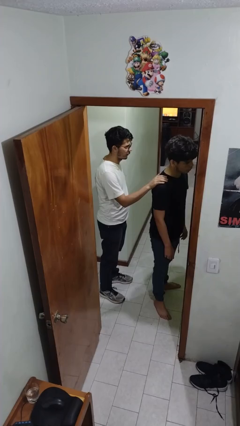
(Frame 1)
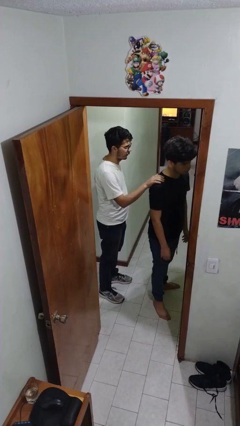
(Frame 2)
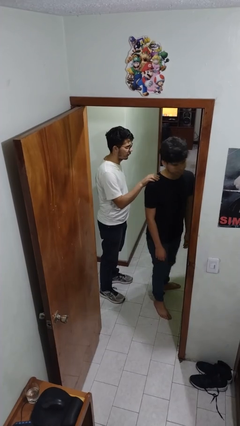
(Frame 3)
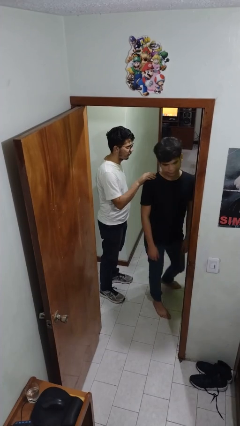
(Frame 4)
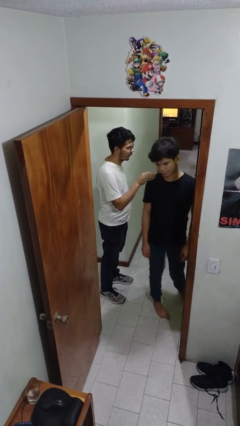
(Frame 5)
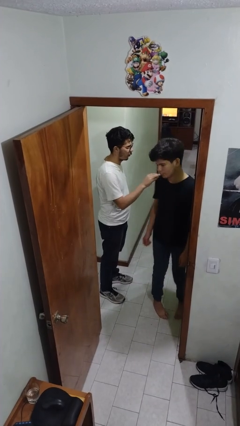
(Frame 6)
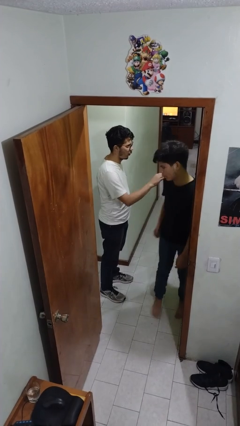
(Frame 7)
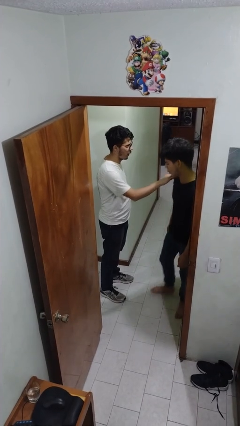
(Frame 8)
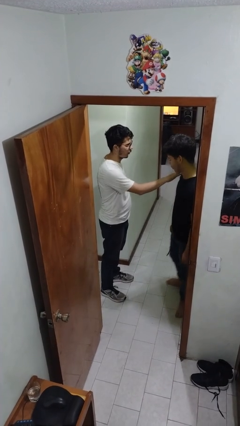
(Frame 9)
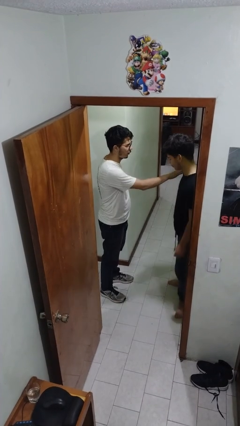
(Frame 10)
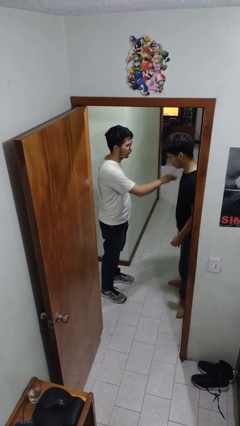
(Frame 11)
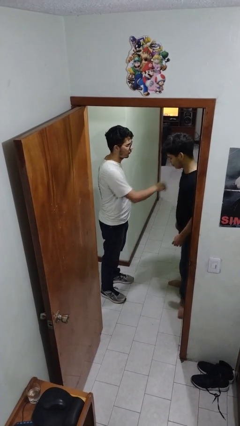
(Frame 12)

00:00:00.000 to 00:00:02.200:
person spins person around

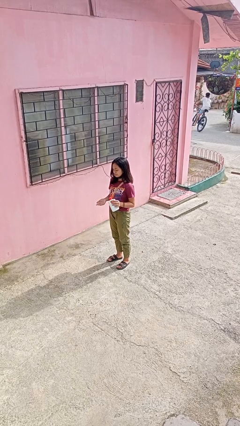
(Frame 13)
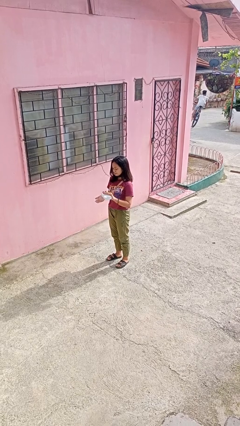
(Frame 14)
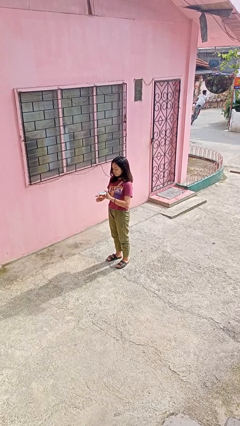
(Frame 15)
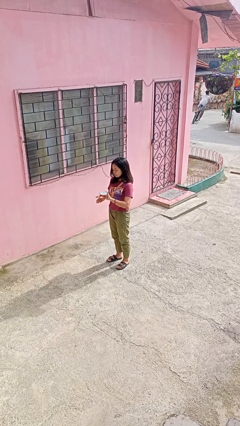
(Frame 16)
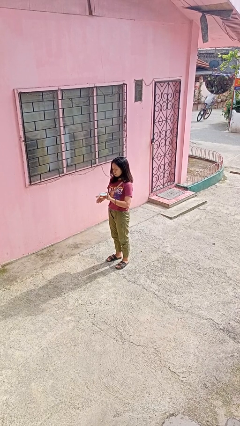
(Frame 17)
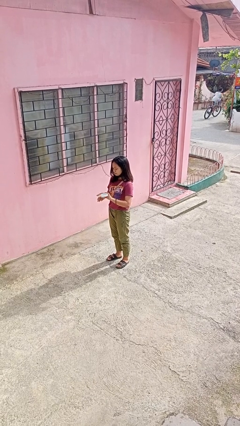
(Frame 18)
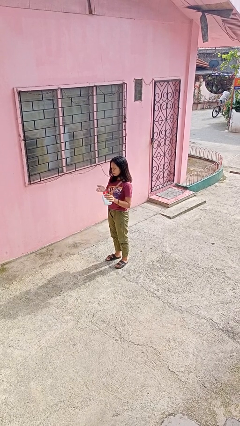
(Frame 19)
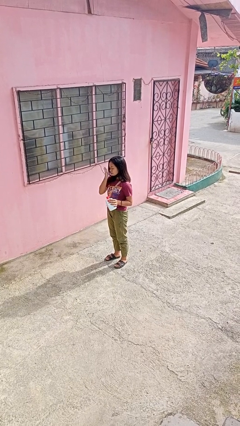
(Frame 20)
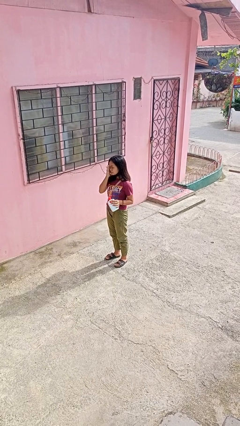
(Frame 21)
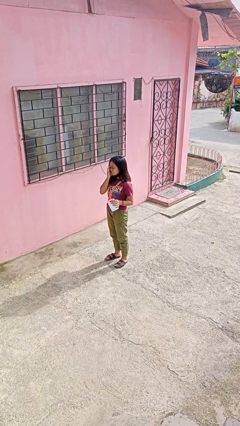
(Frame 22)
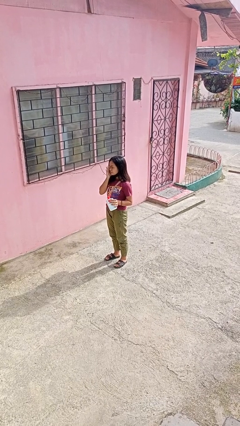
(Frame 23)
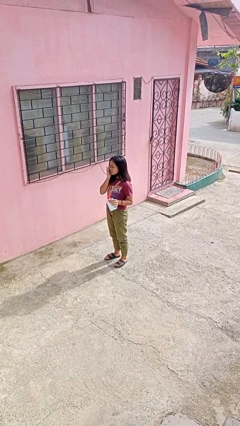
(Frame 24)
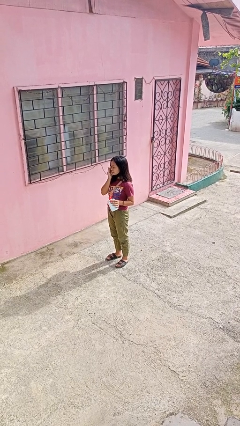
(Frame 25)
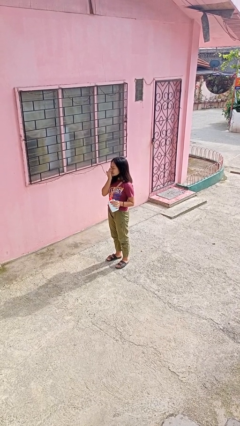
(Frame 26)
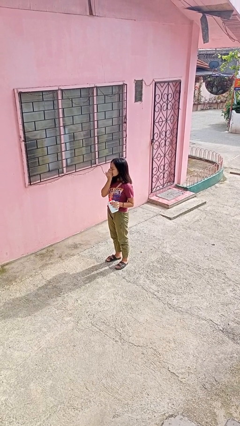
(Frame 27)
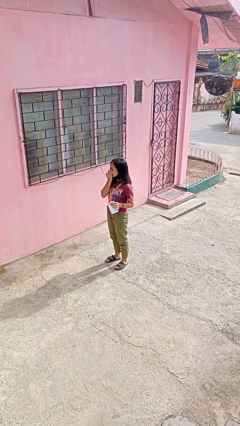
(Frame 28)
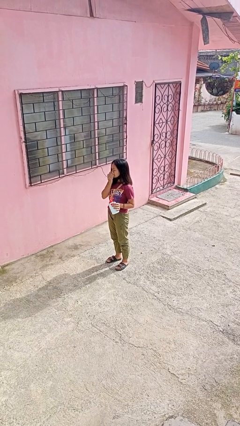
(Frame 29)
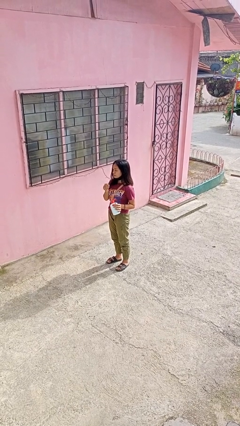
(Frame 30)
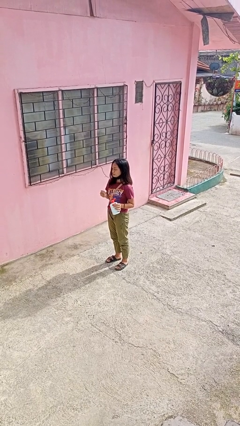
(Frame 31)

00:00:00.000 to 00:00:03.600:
person applies facial moisturizer

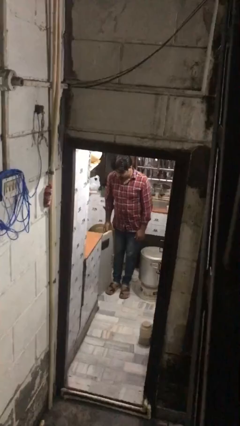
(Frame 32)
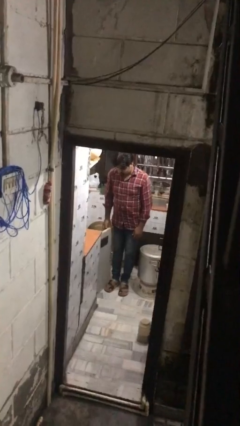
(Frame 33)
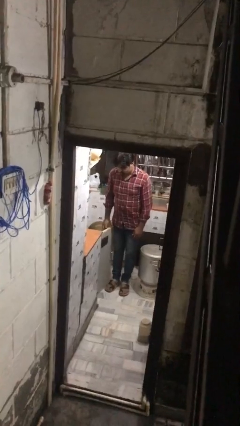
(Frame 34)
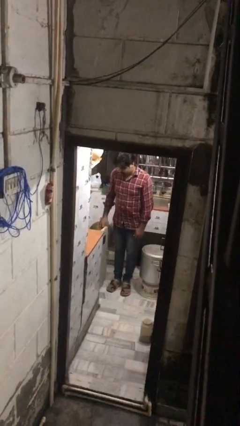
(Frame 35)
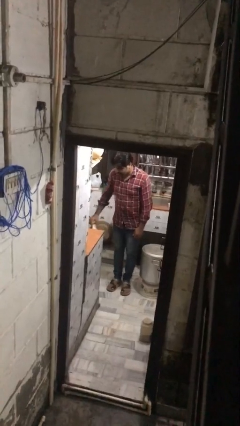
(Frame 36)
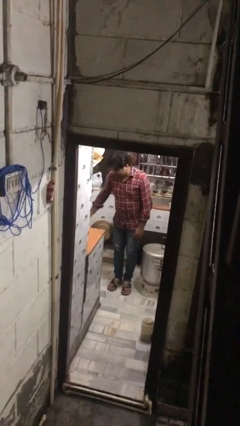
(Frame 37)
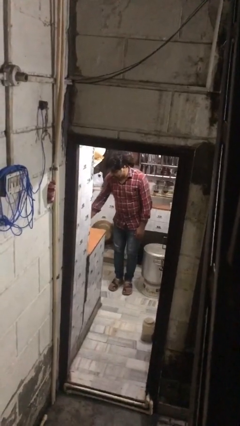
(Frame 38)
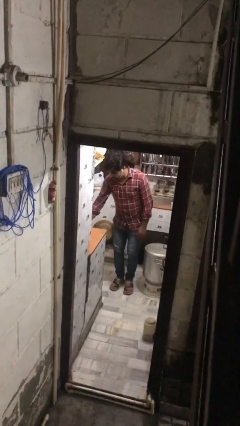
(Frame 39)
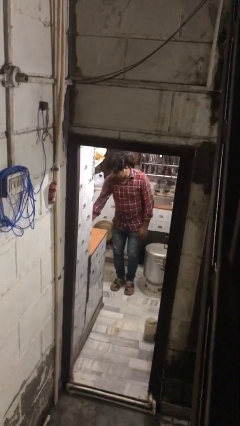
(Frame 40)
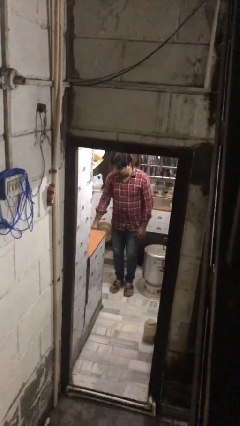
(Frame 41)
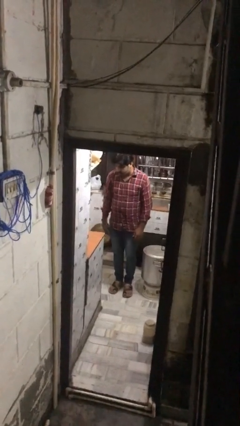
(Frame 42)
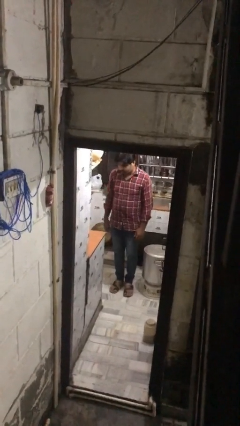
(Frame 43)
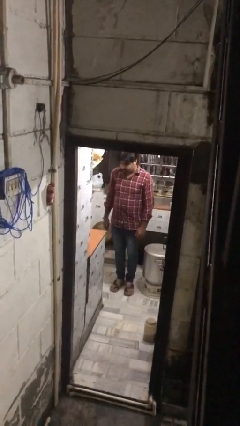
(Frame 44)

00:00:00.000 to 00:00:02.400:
person closes kitchen drawer

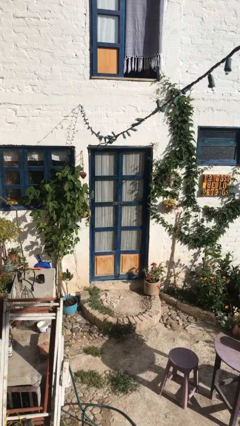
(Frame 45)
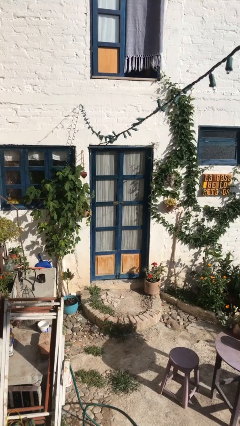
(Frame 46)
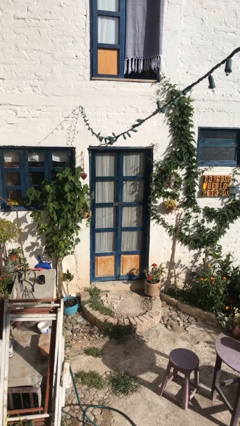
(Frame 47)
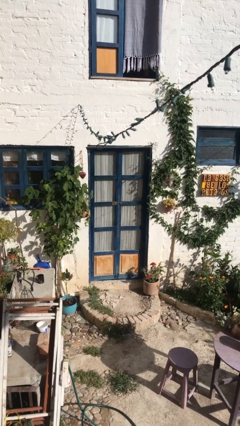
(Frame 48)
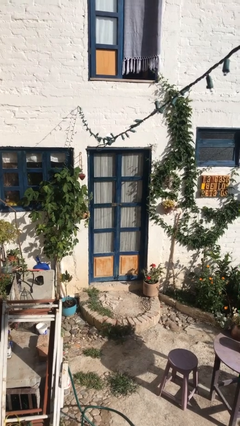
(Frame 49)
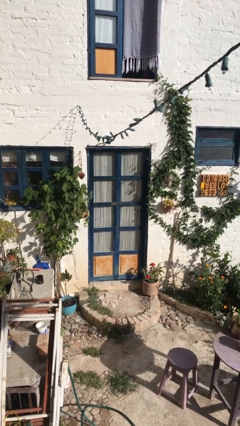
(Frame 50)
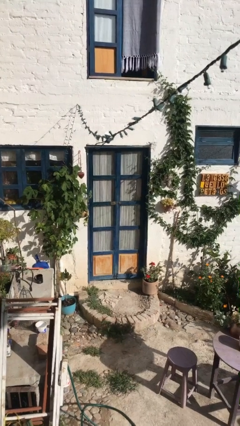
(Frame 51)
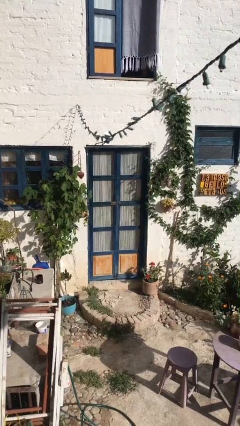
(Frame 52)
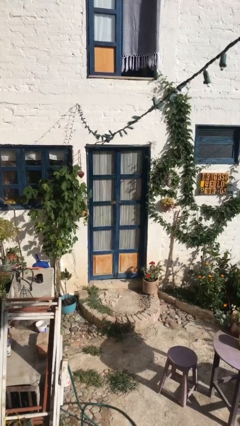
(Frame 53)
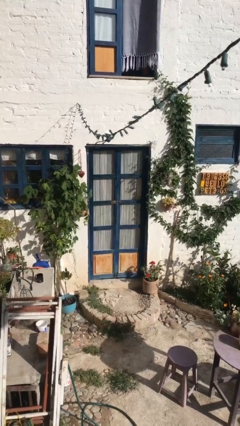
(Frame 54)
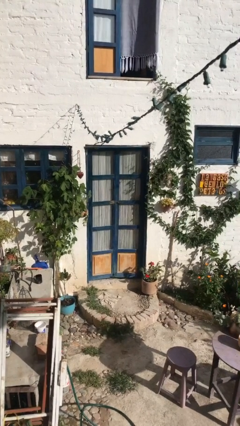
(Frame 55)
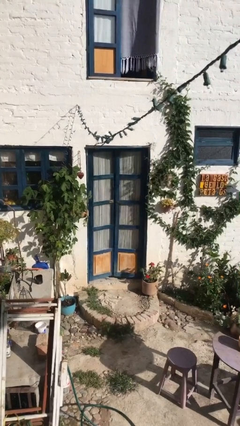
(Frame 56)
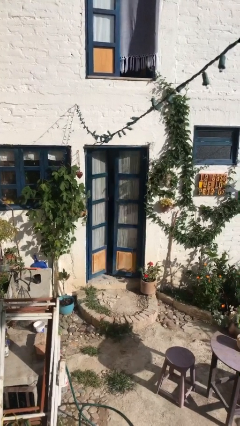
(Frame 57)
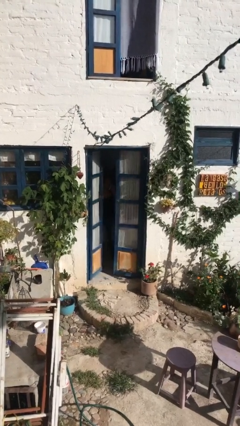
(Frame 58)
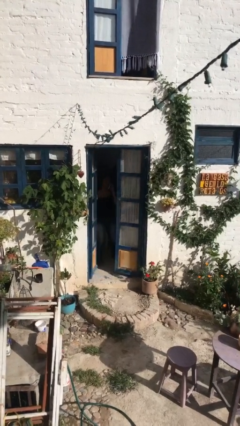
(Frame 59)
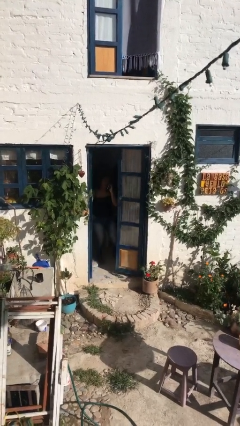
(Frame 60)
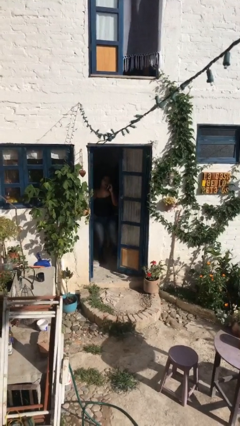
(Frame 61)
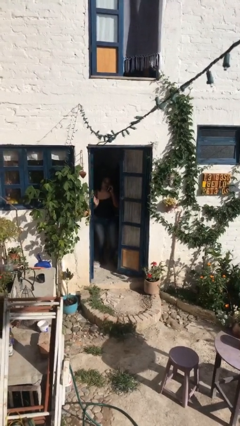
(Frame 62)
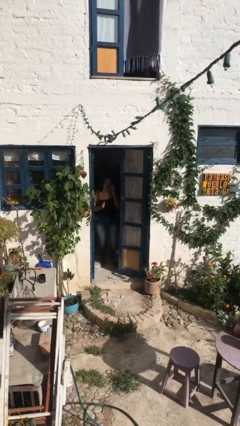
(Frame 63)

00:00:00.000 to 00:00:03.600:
person opens facility door

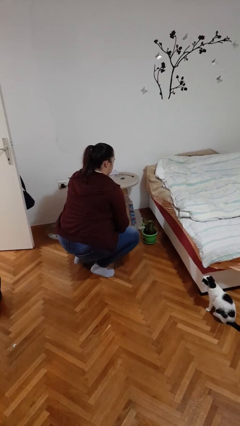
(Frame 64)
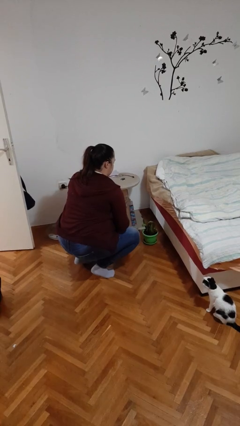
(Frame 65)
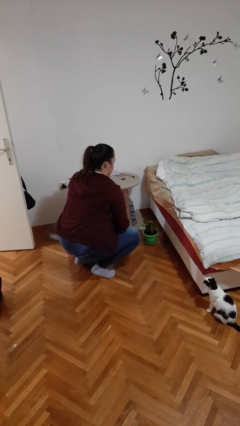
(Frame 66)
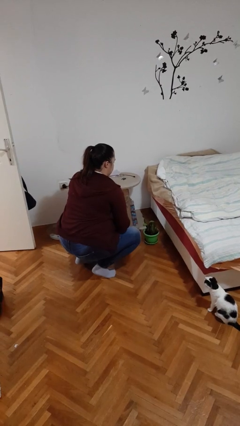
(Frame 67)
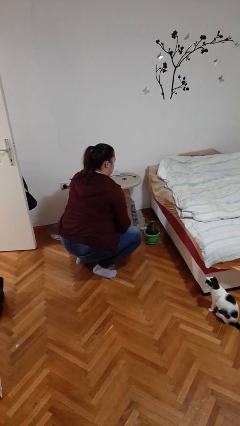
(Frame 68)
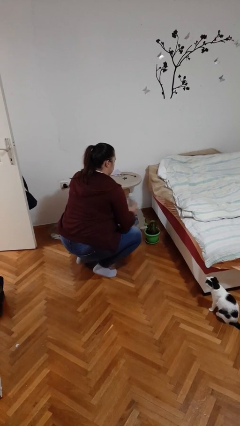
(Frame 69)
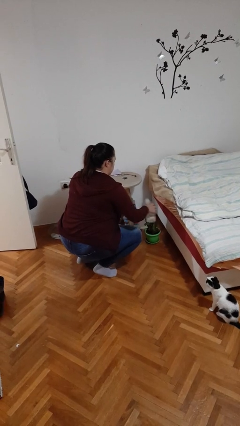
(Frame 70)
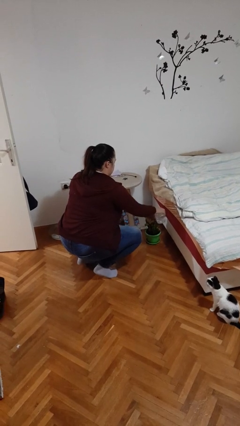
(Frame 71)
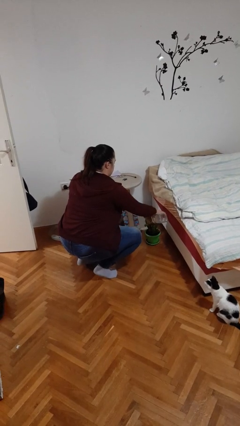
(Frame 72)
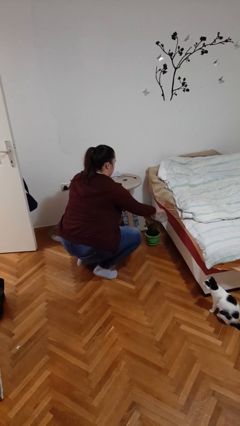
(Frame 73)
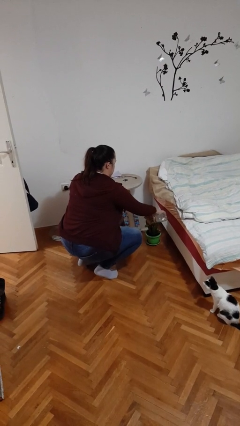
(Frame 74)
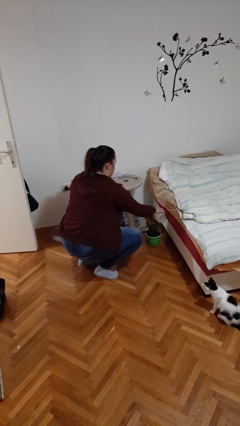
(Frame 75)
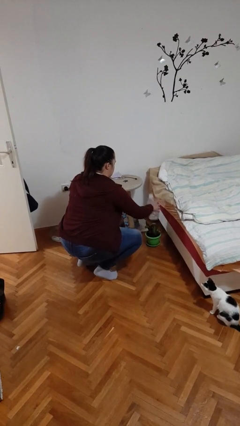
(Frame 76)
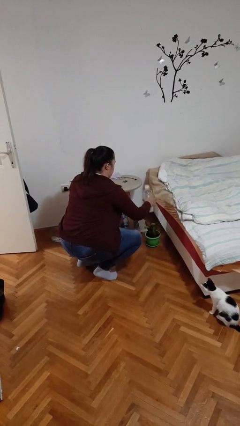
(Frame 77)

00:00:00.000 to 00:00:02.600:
person waters houseplant

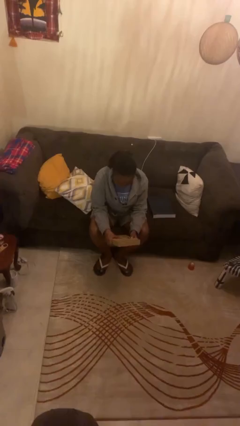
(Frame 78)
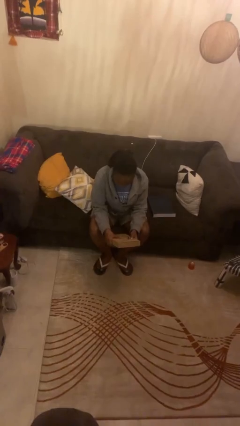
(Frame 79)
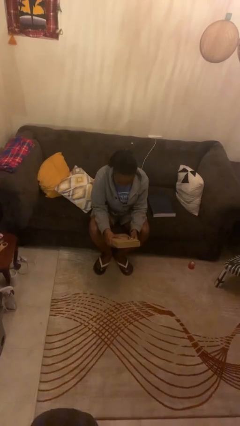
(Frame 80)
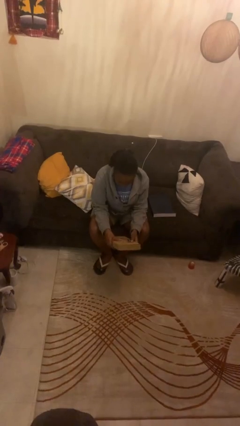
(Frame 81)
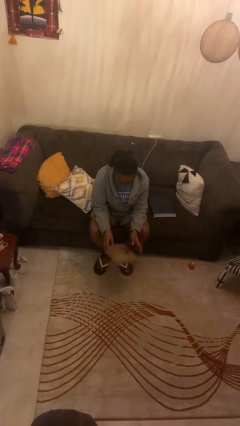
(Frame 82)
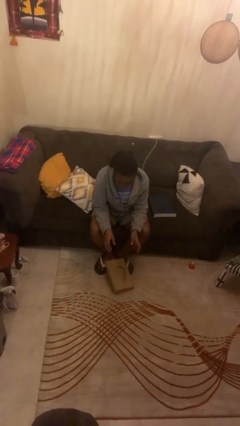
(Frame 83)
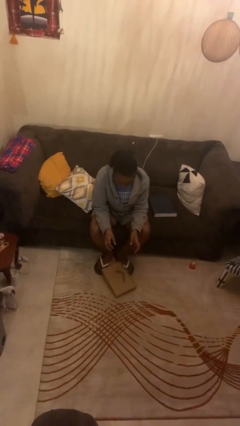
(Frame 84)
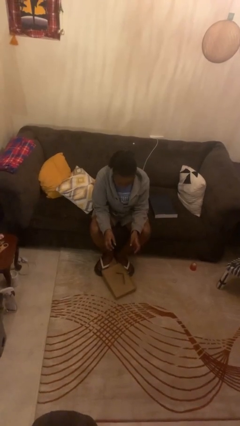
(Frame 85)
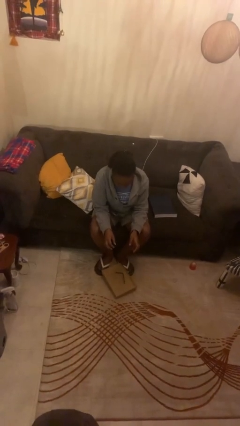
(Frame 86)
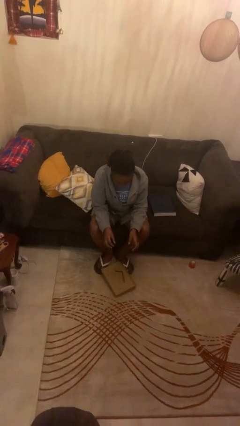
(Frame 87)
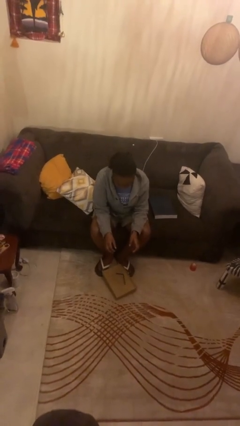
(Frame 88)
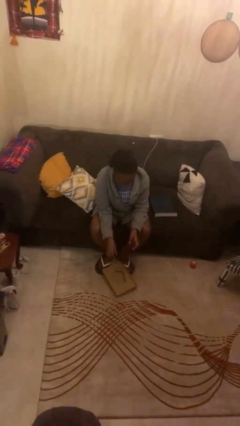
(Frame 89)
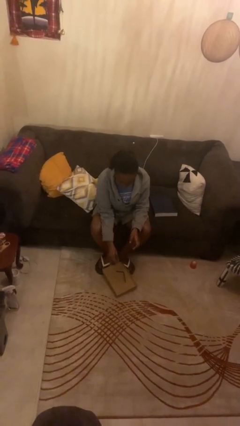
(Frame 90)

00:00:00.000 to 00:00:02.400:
person drops object
